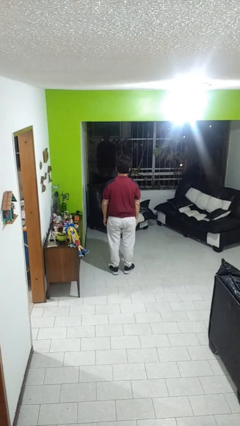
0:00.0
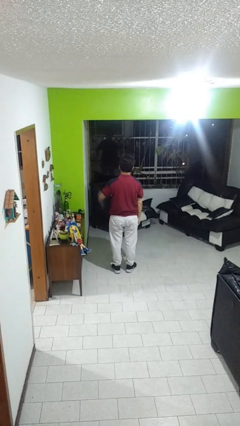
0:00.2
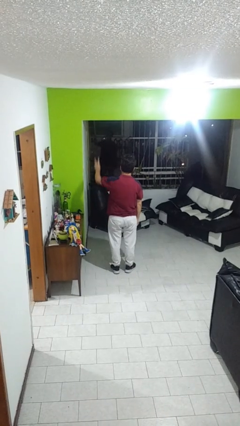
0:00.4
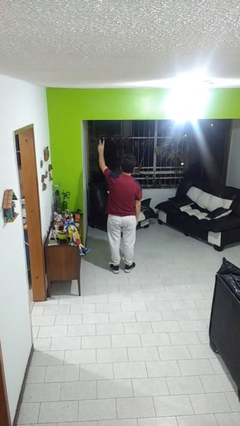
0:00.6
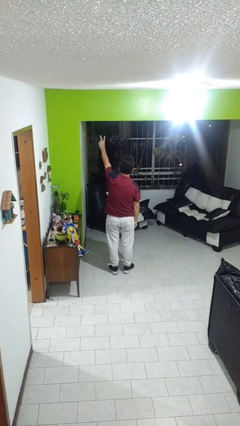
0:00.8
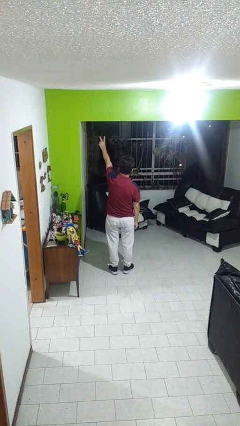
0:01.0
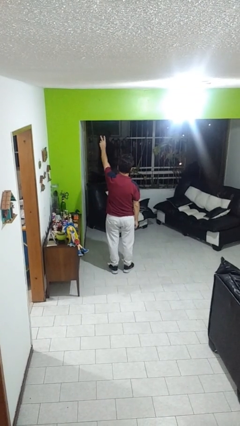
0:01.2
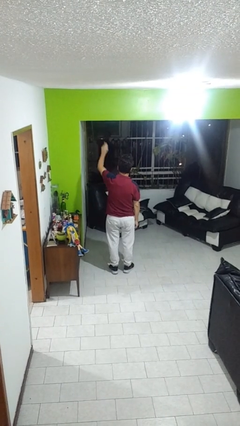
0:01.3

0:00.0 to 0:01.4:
person gestures peace

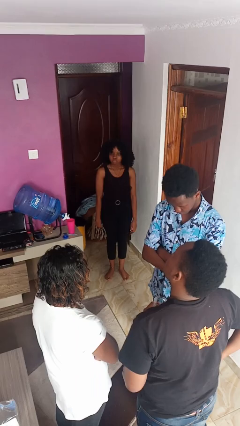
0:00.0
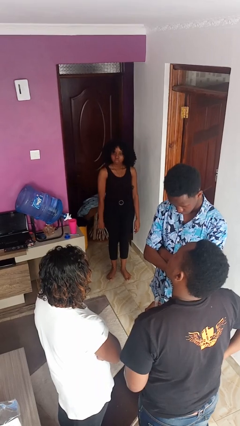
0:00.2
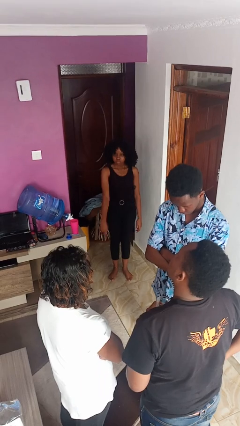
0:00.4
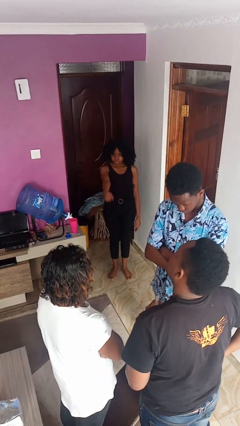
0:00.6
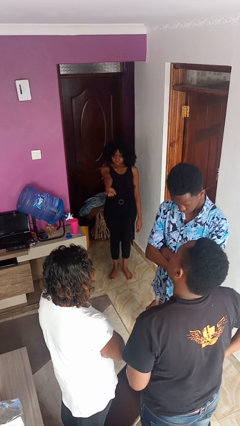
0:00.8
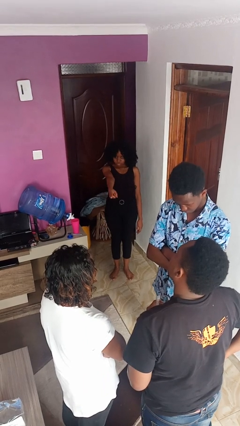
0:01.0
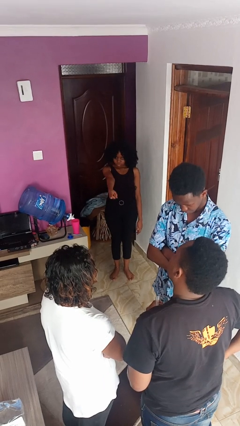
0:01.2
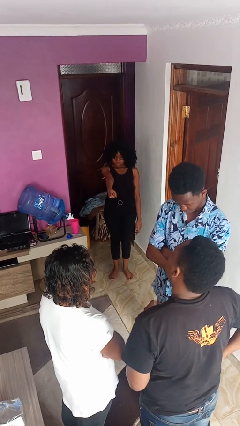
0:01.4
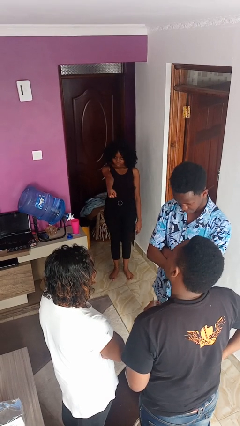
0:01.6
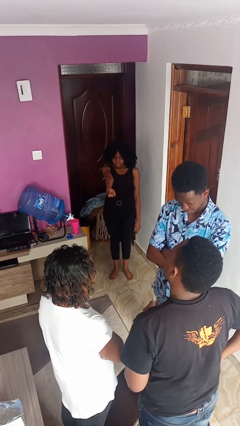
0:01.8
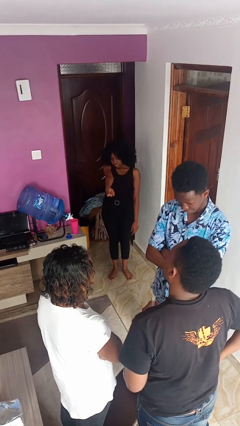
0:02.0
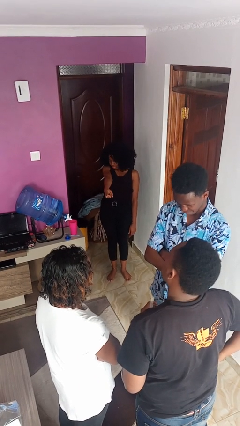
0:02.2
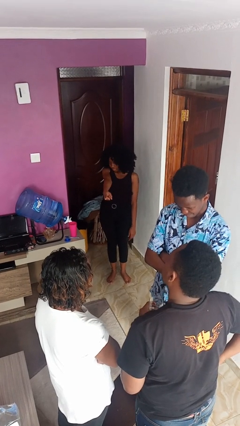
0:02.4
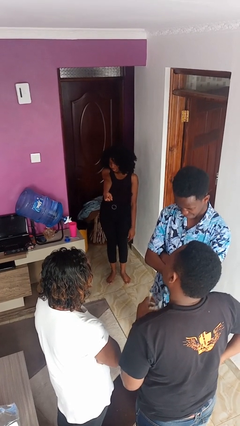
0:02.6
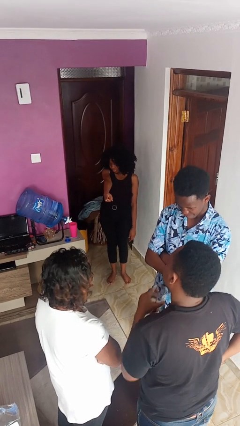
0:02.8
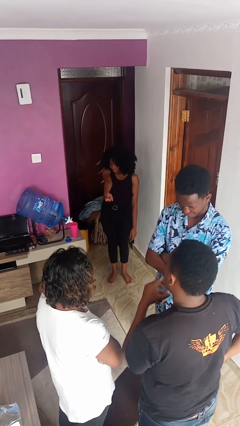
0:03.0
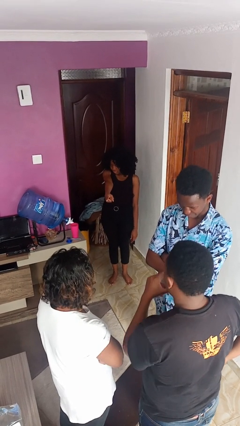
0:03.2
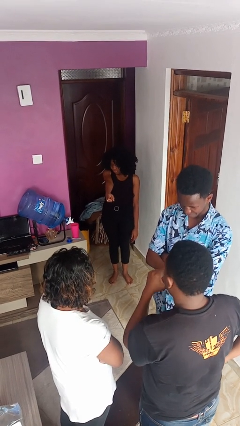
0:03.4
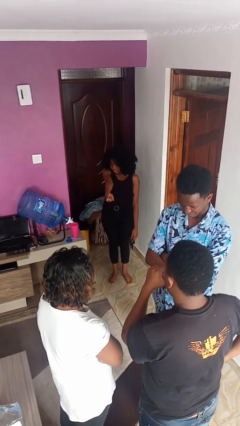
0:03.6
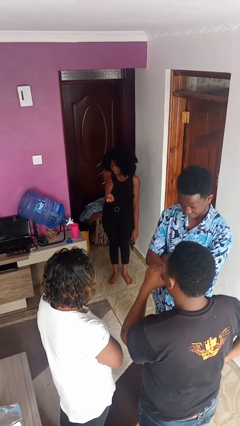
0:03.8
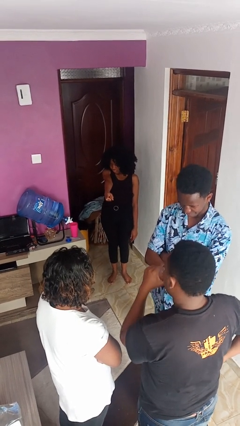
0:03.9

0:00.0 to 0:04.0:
person points at person

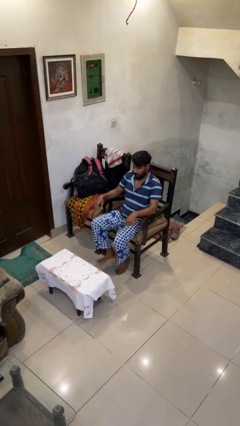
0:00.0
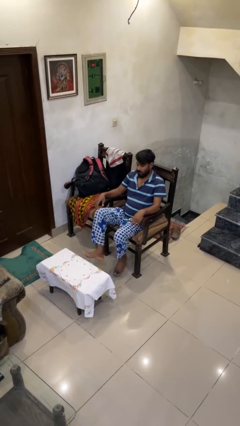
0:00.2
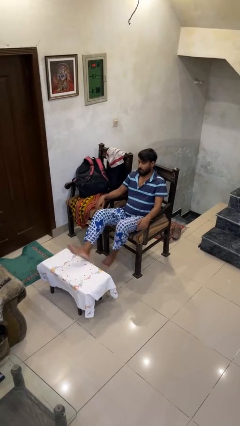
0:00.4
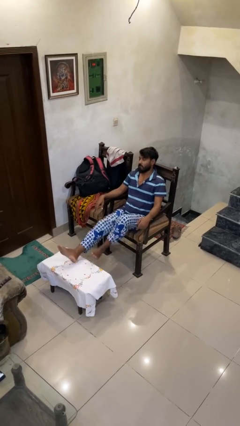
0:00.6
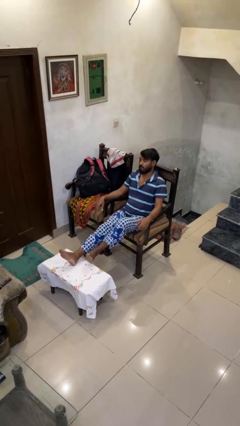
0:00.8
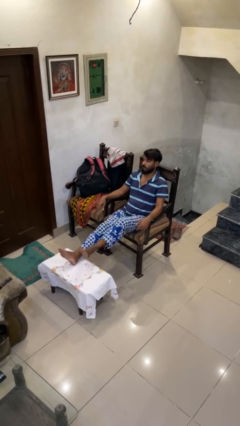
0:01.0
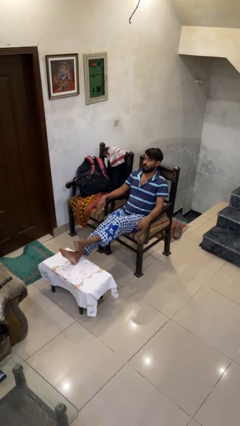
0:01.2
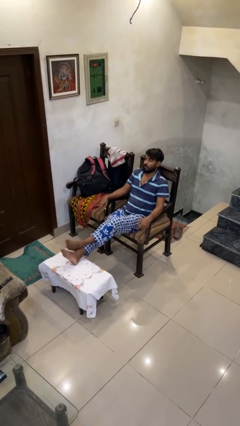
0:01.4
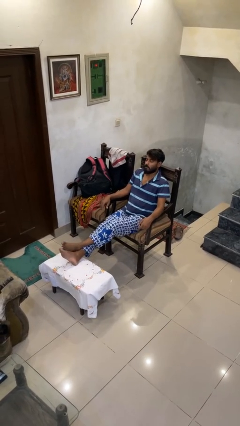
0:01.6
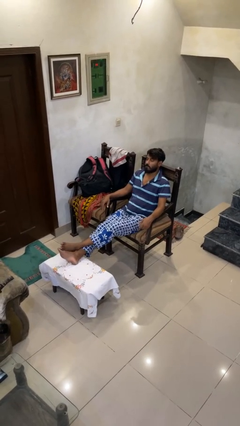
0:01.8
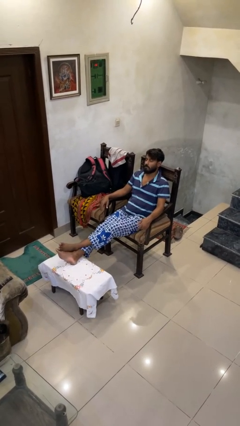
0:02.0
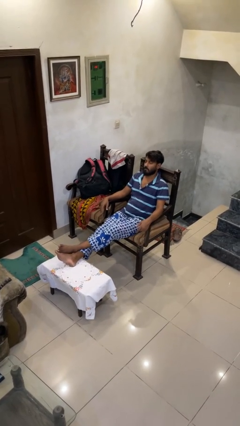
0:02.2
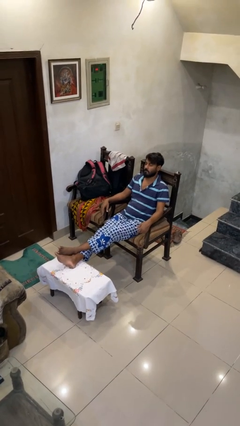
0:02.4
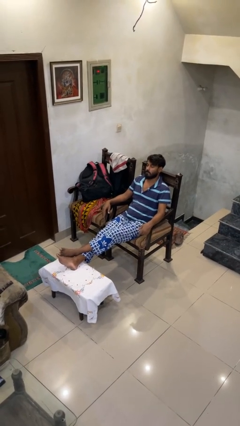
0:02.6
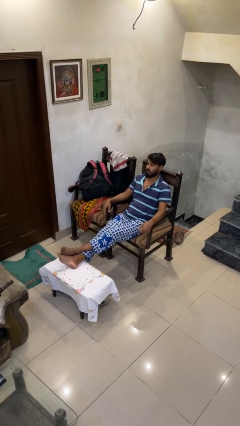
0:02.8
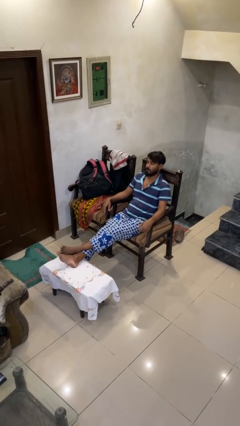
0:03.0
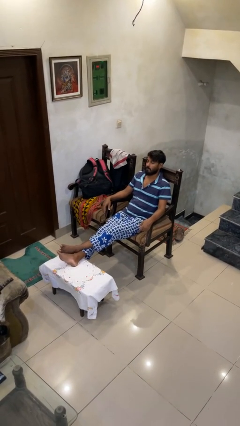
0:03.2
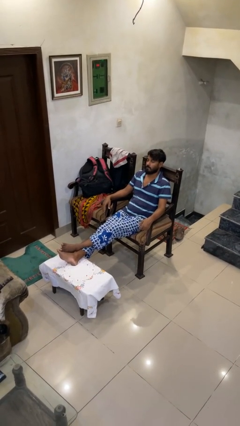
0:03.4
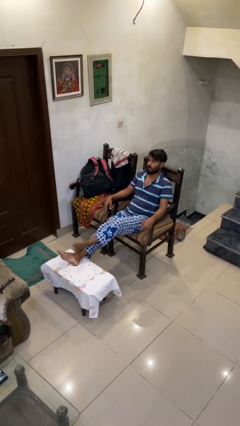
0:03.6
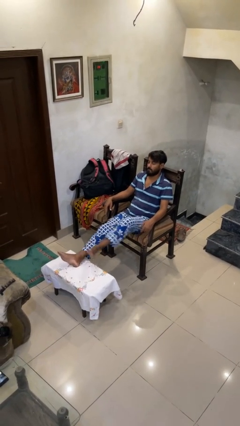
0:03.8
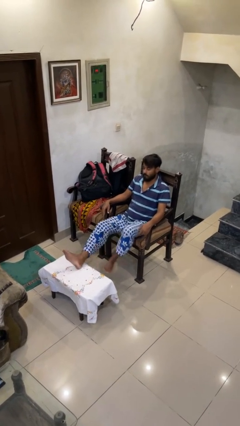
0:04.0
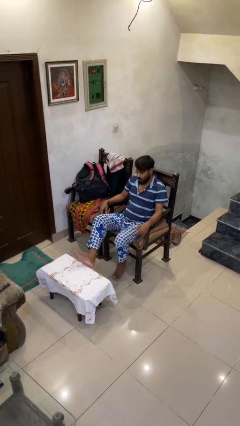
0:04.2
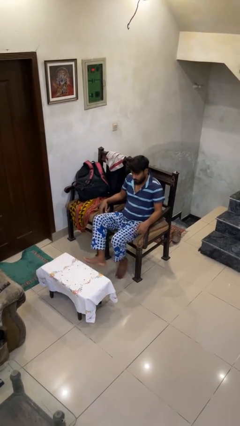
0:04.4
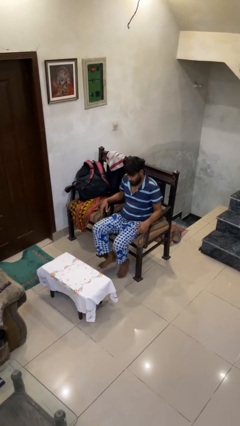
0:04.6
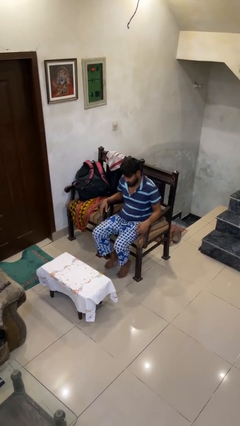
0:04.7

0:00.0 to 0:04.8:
person puts feet up

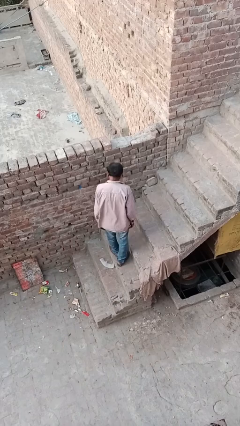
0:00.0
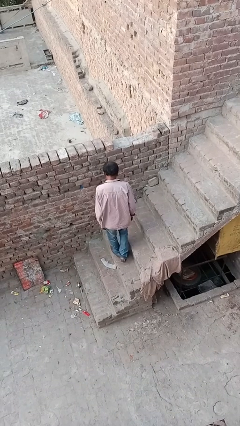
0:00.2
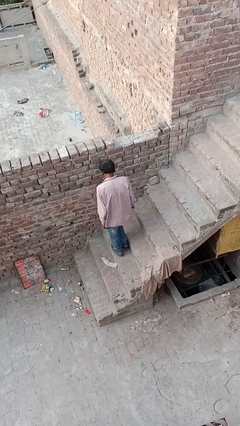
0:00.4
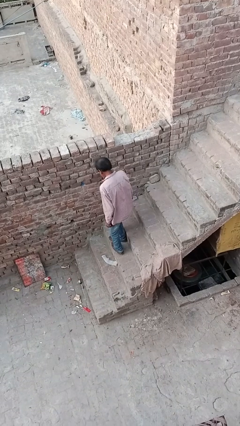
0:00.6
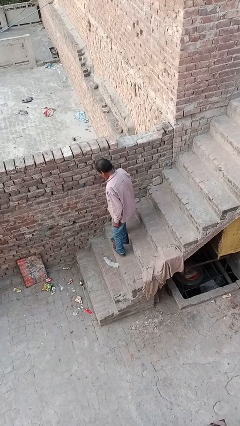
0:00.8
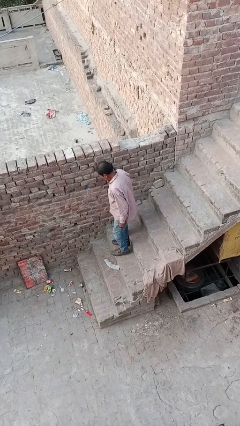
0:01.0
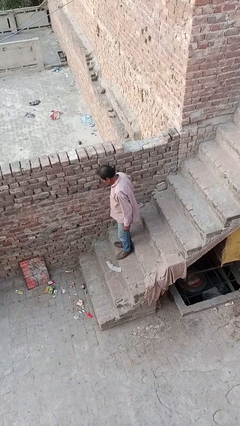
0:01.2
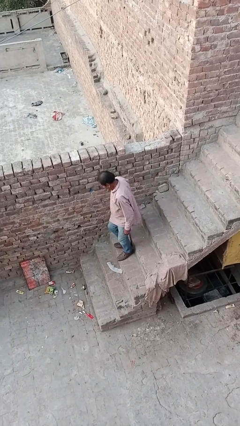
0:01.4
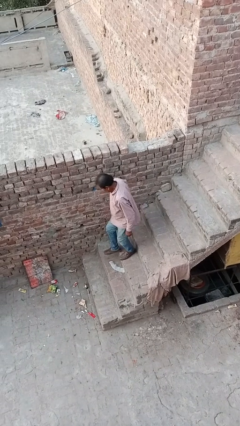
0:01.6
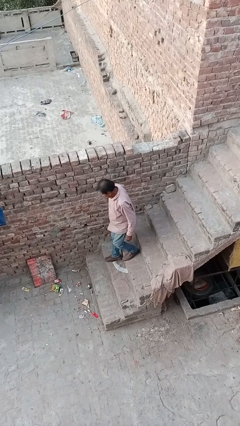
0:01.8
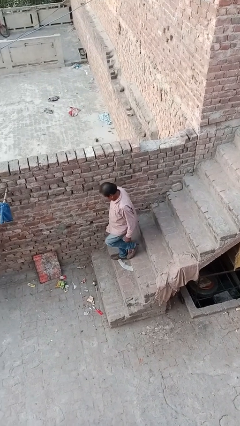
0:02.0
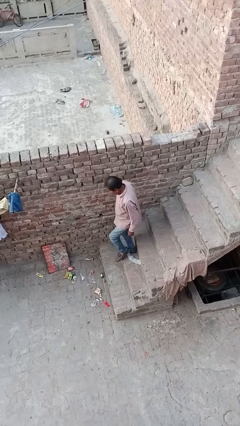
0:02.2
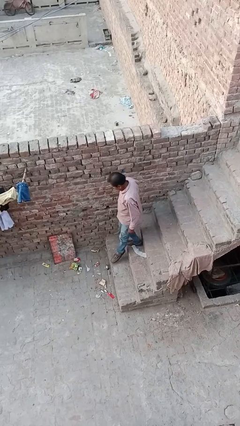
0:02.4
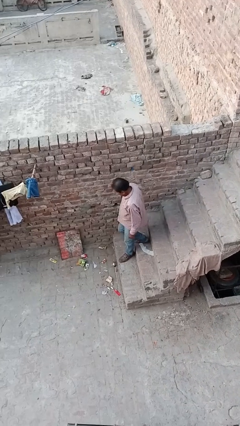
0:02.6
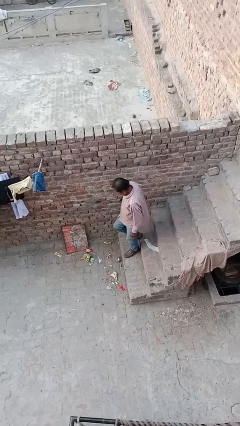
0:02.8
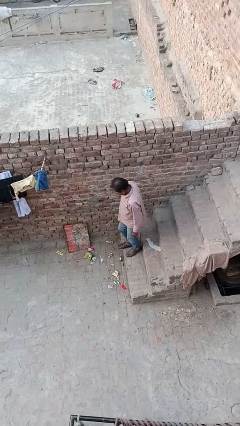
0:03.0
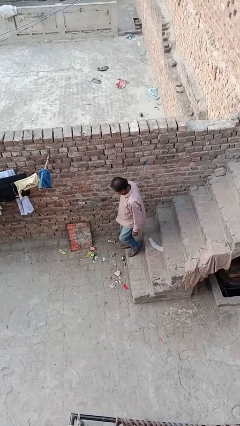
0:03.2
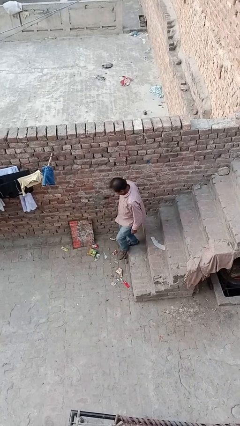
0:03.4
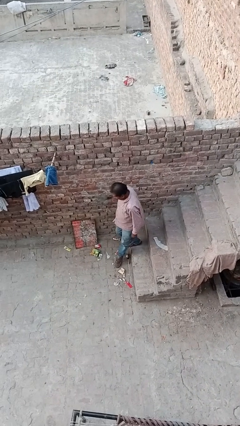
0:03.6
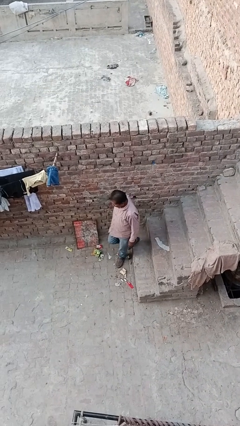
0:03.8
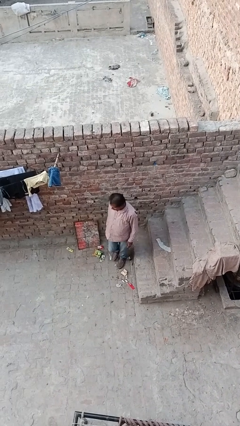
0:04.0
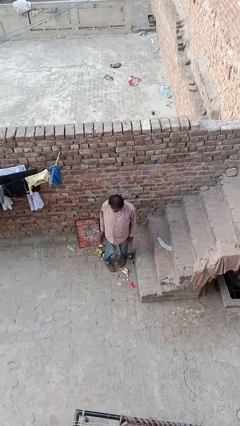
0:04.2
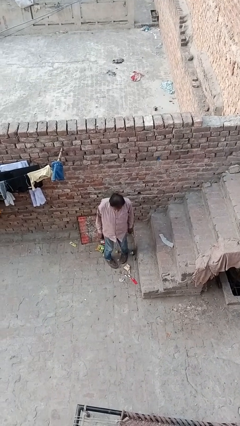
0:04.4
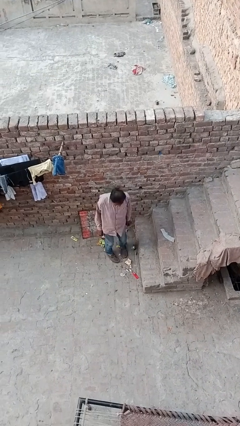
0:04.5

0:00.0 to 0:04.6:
person climbs down stairs

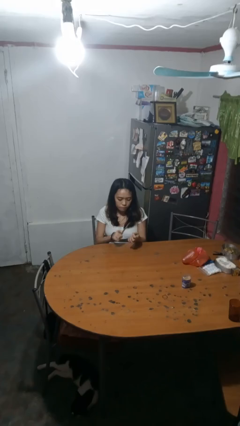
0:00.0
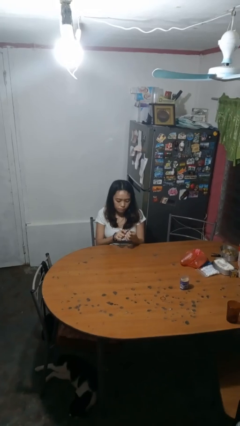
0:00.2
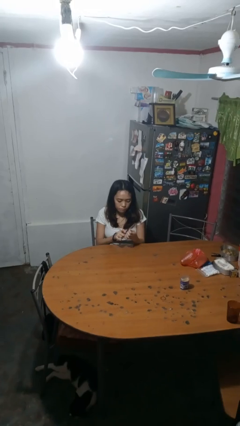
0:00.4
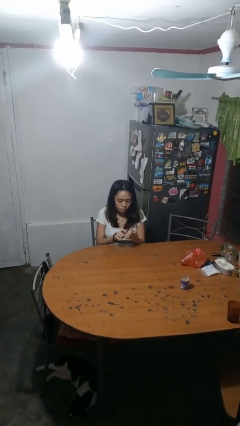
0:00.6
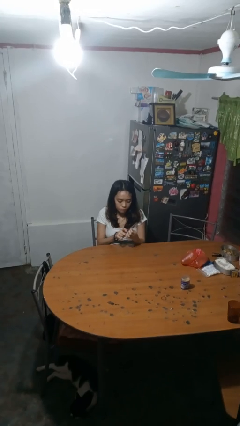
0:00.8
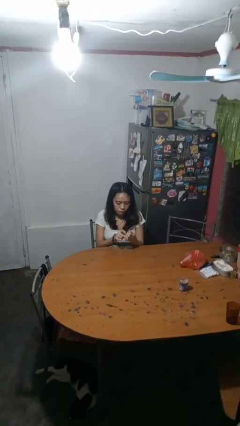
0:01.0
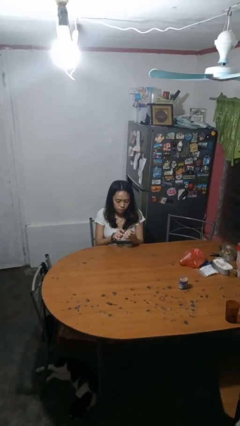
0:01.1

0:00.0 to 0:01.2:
person files fingernails

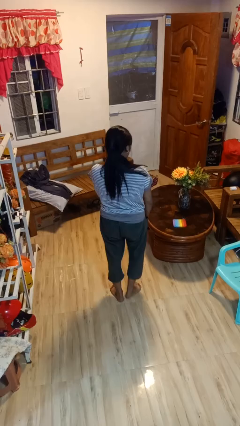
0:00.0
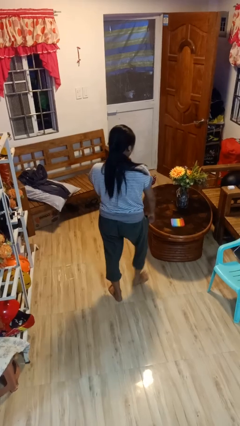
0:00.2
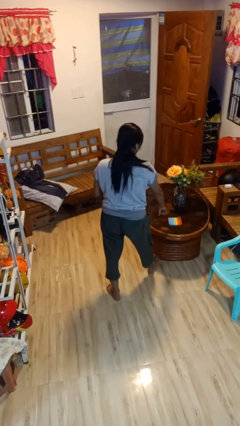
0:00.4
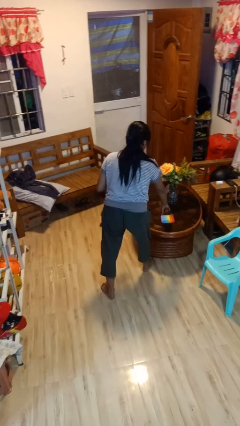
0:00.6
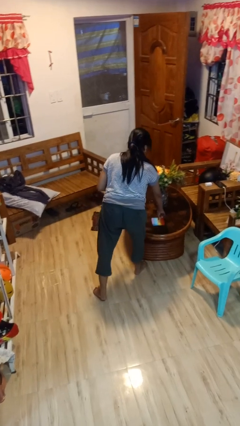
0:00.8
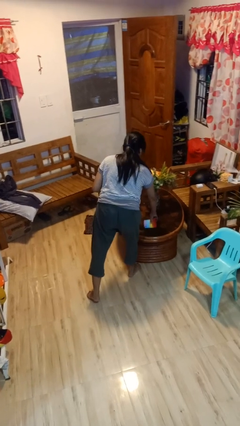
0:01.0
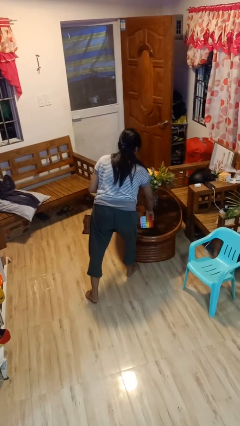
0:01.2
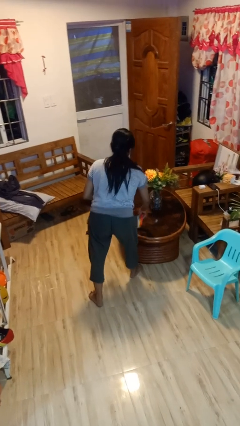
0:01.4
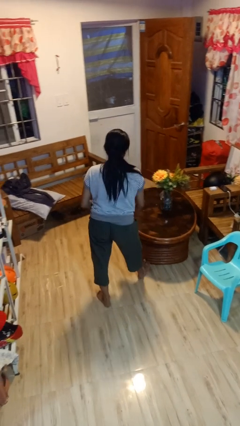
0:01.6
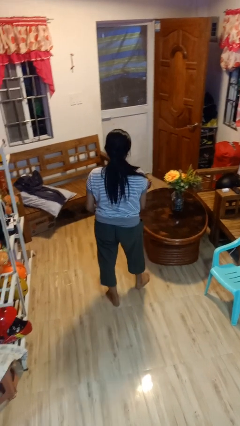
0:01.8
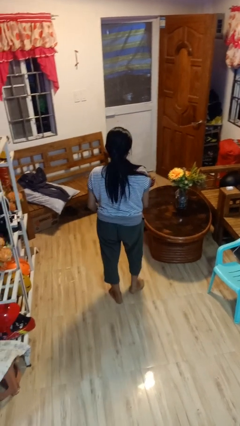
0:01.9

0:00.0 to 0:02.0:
person picks up object from table
